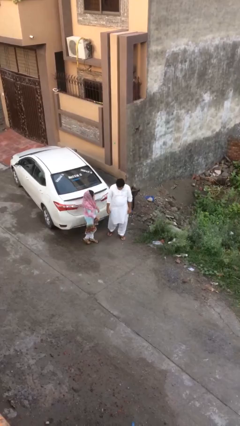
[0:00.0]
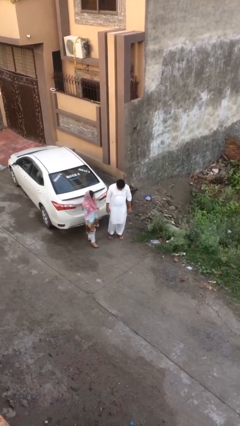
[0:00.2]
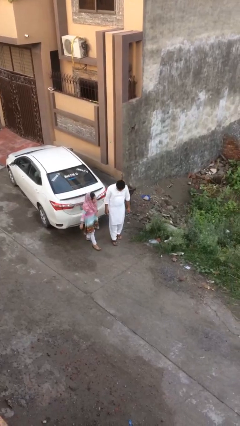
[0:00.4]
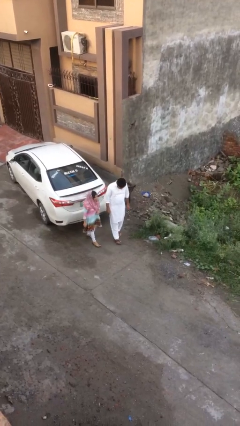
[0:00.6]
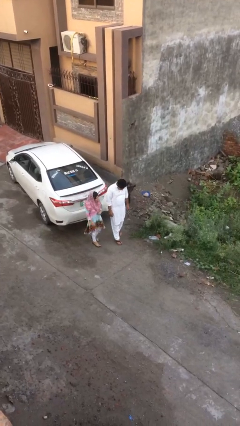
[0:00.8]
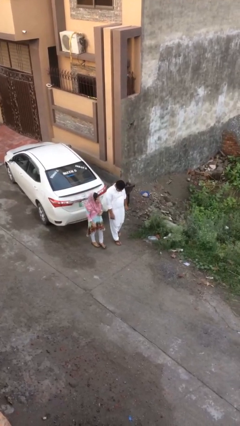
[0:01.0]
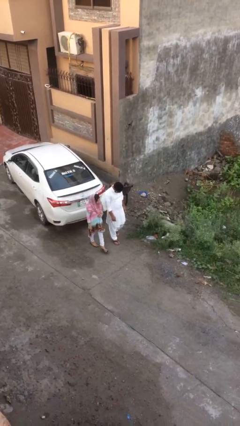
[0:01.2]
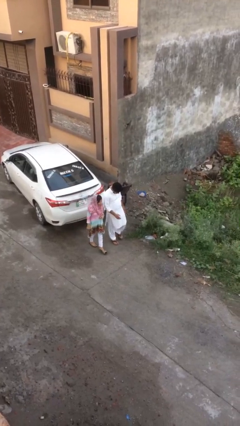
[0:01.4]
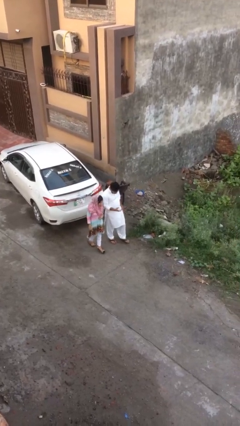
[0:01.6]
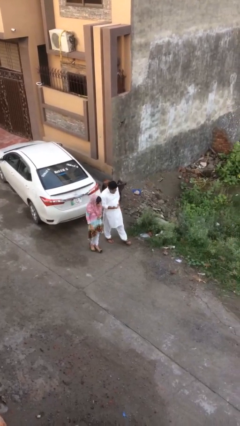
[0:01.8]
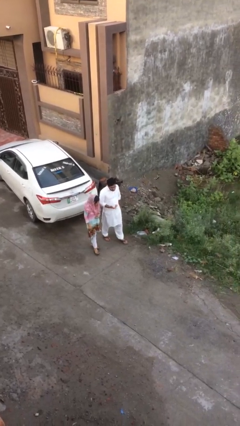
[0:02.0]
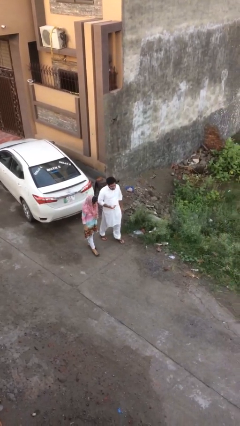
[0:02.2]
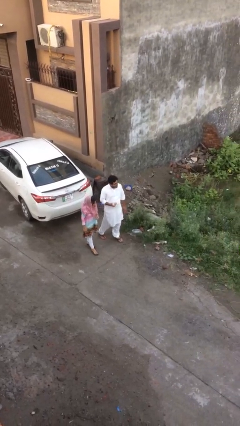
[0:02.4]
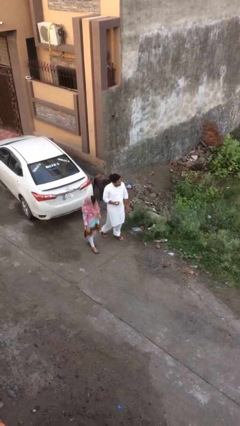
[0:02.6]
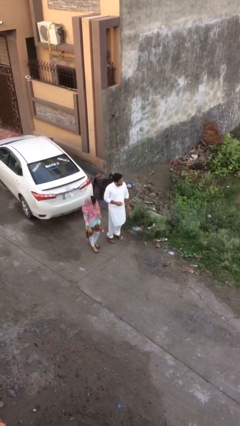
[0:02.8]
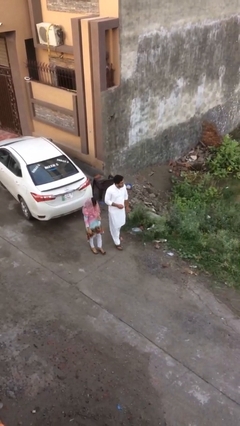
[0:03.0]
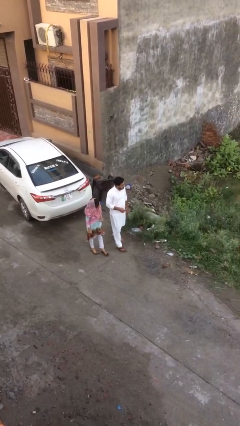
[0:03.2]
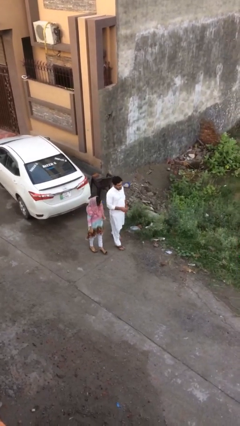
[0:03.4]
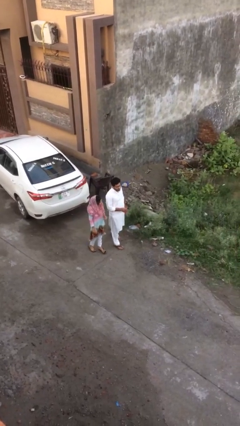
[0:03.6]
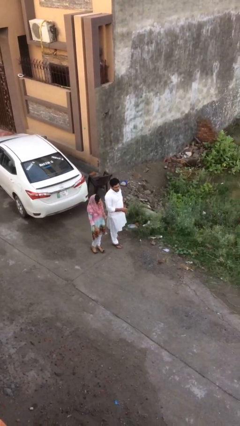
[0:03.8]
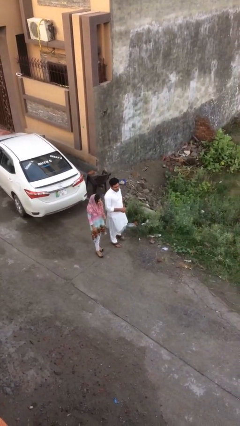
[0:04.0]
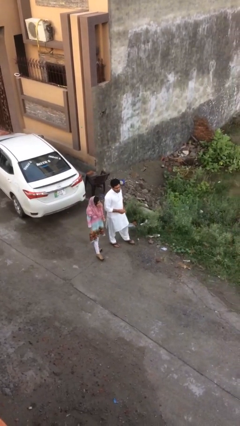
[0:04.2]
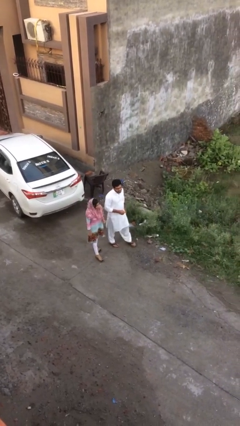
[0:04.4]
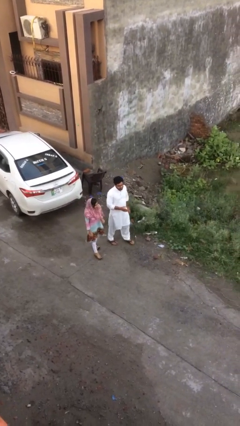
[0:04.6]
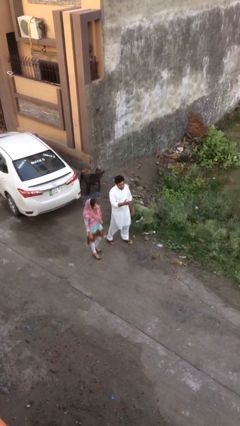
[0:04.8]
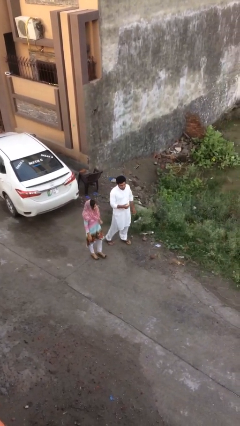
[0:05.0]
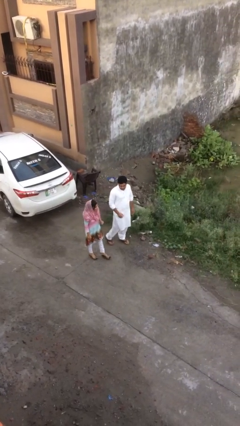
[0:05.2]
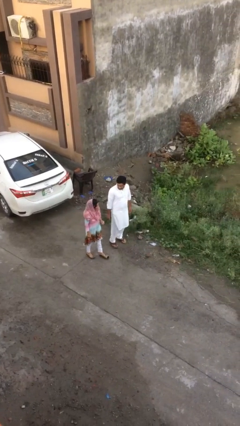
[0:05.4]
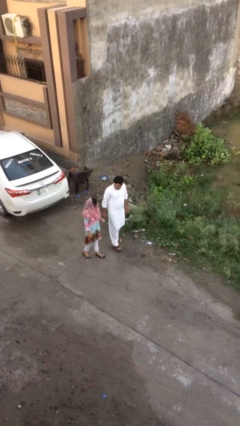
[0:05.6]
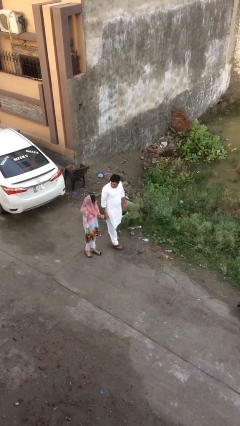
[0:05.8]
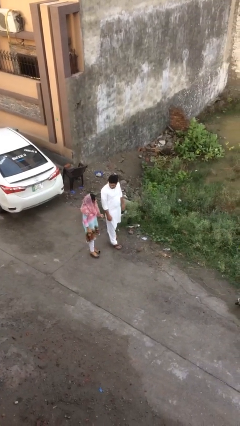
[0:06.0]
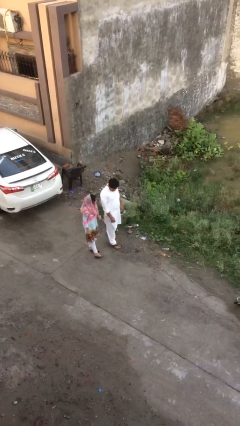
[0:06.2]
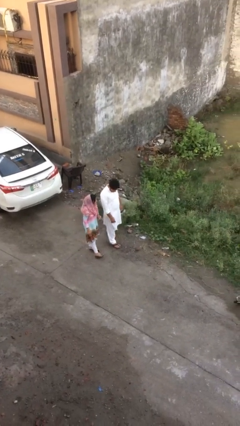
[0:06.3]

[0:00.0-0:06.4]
person talks to person

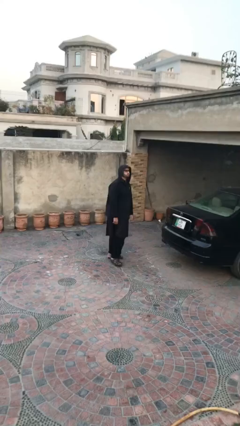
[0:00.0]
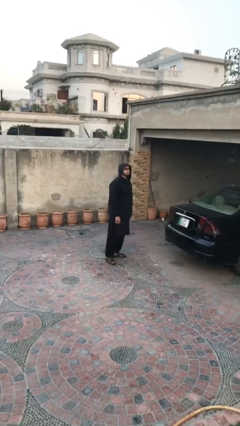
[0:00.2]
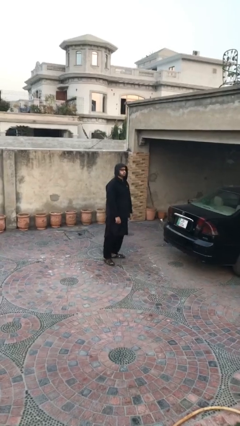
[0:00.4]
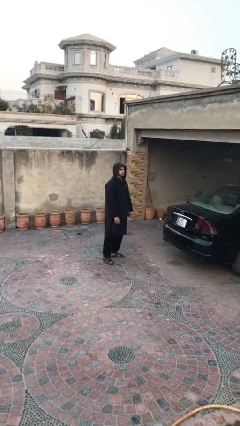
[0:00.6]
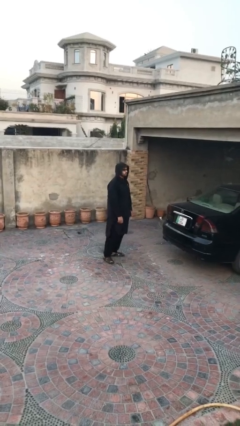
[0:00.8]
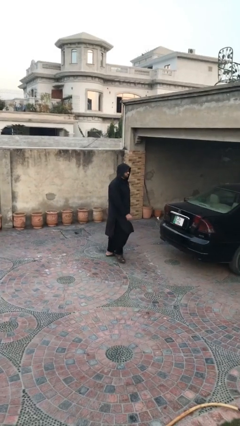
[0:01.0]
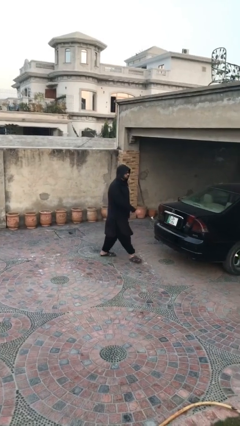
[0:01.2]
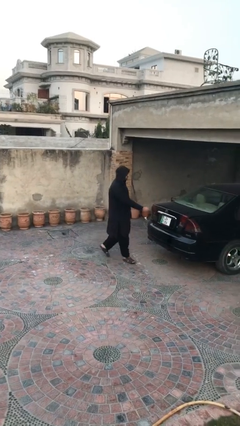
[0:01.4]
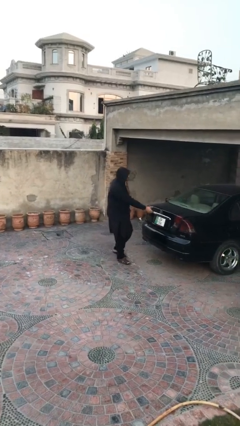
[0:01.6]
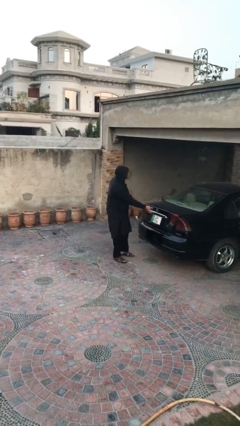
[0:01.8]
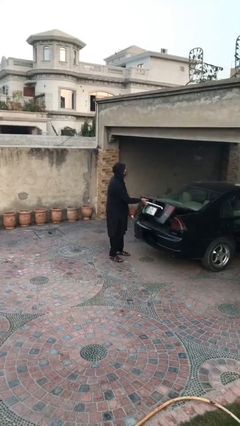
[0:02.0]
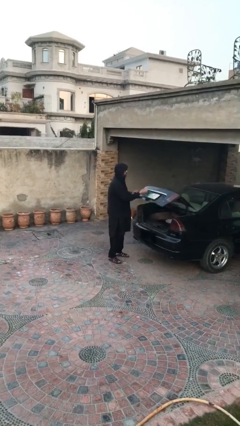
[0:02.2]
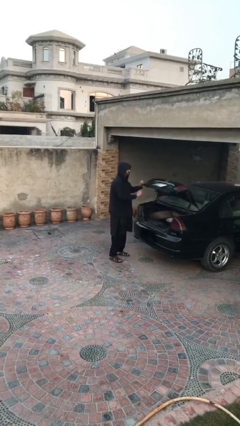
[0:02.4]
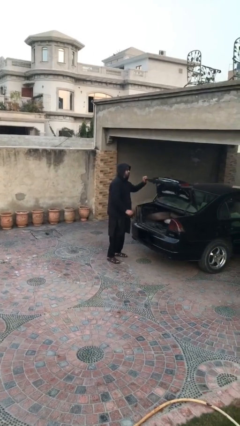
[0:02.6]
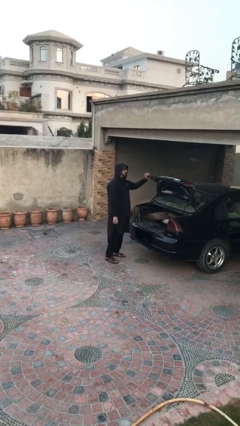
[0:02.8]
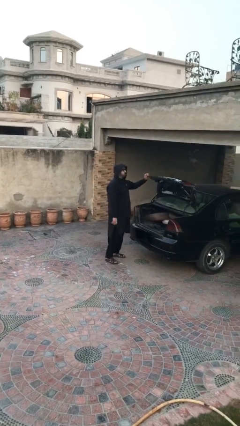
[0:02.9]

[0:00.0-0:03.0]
person opens car trunk

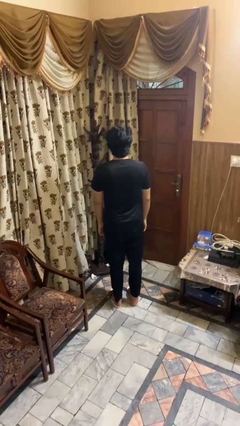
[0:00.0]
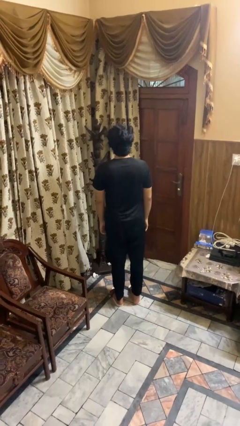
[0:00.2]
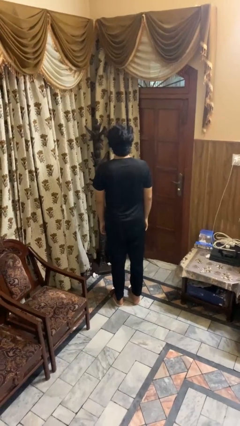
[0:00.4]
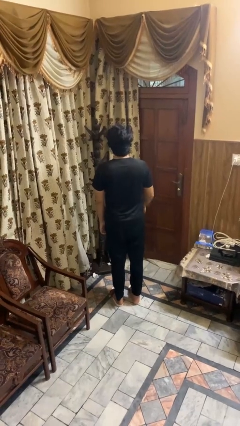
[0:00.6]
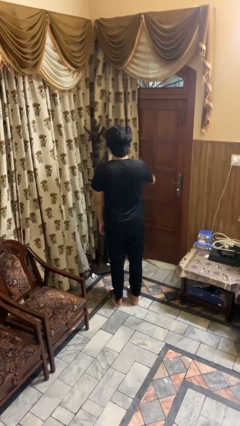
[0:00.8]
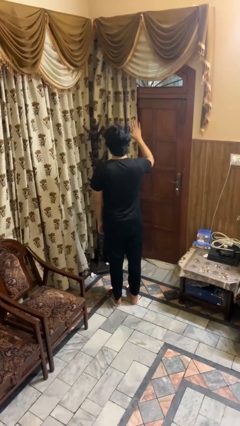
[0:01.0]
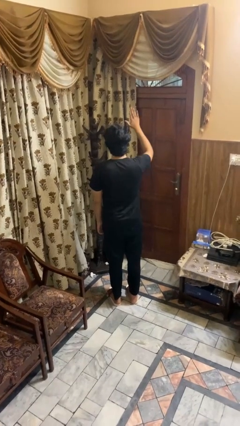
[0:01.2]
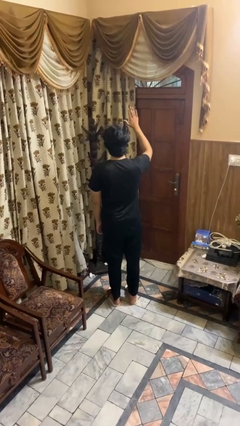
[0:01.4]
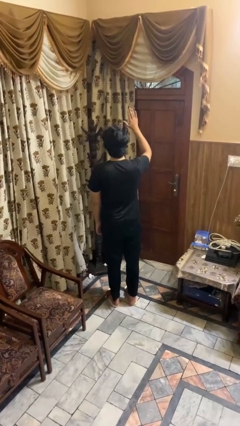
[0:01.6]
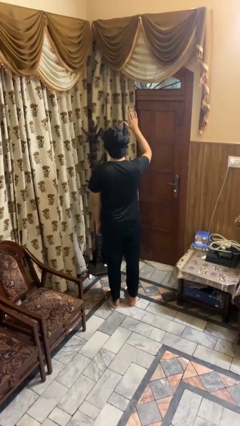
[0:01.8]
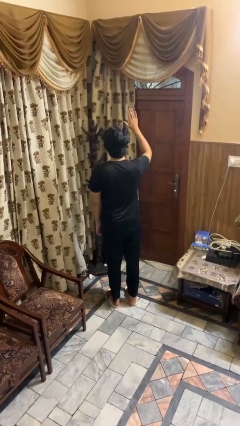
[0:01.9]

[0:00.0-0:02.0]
person gestures raise hand

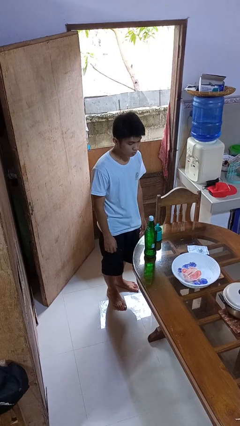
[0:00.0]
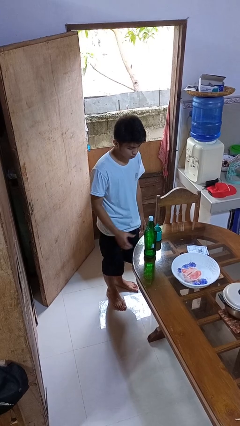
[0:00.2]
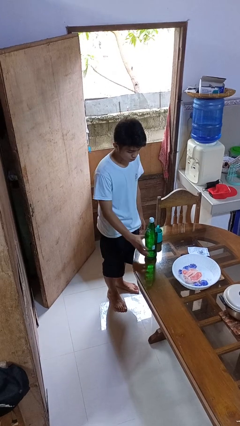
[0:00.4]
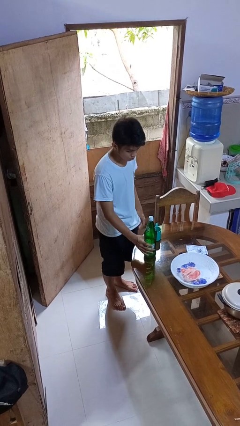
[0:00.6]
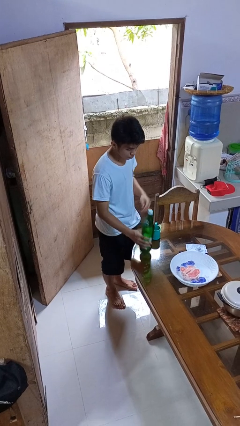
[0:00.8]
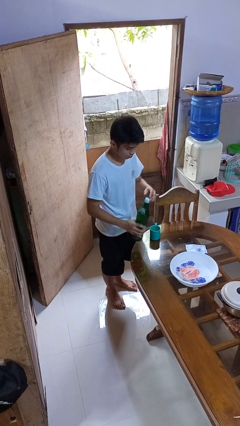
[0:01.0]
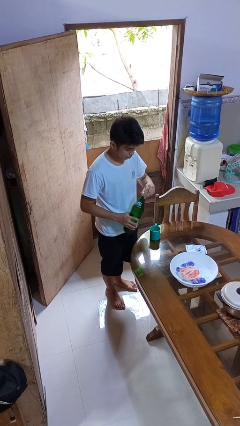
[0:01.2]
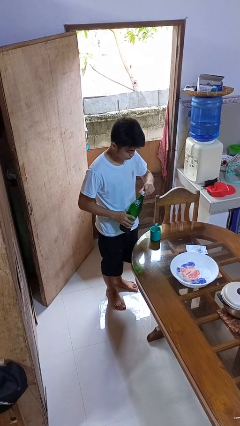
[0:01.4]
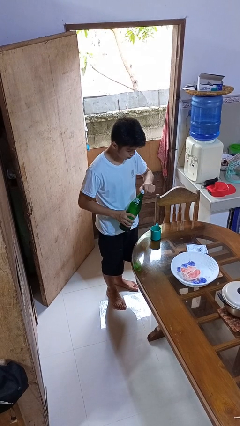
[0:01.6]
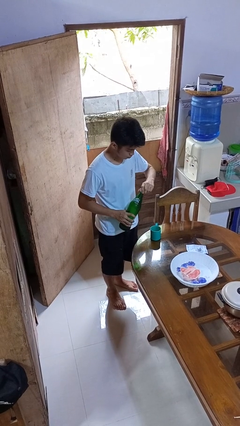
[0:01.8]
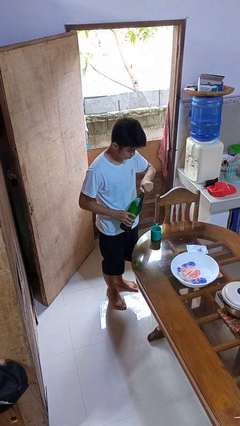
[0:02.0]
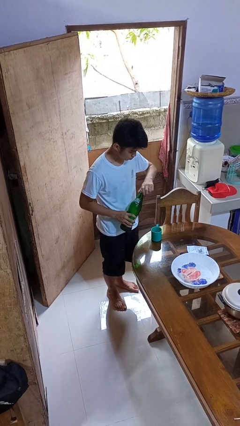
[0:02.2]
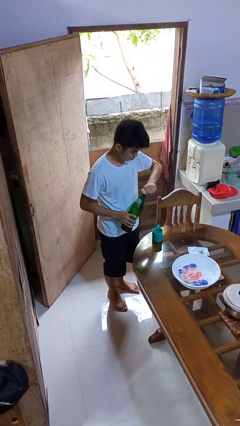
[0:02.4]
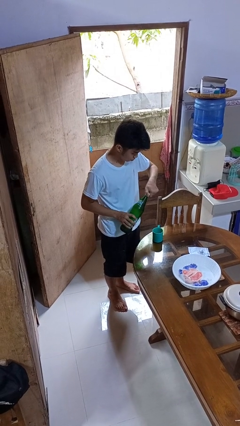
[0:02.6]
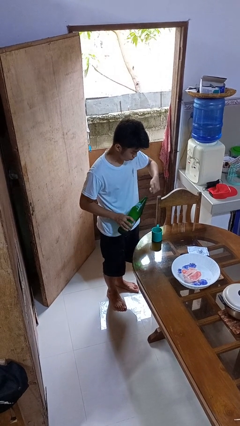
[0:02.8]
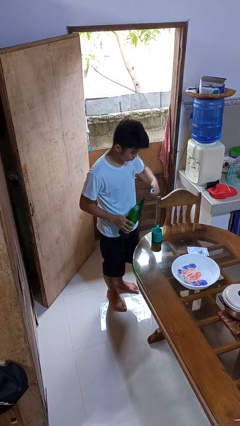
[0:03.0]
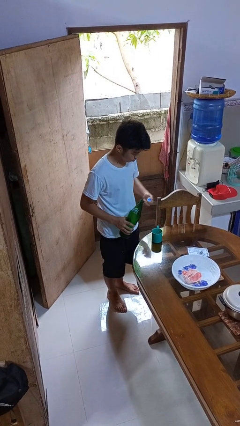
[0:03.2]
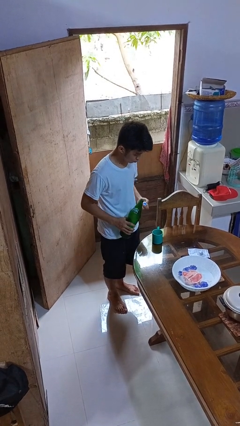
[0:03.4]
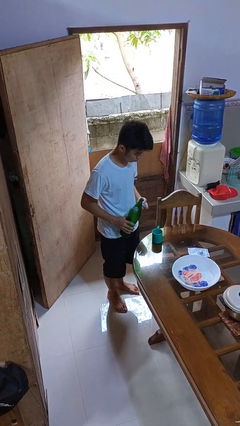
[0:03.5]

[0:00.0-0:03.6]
person unscrews lid from bottle

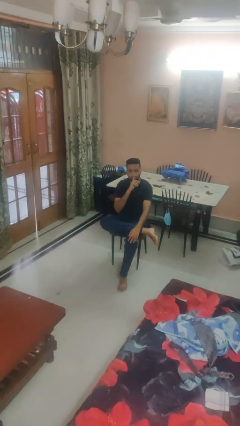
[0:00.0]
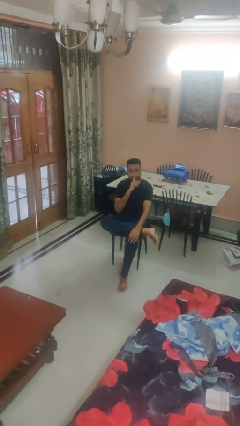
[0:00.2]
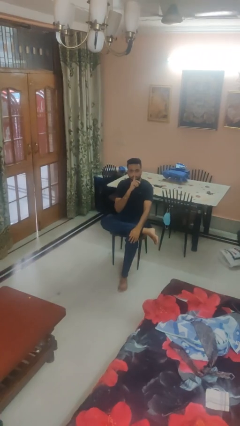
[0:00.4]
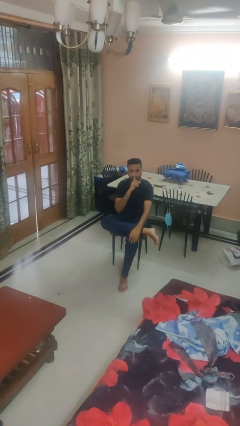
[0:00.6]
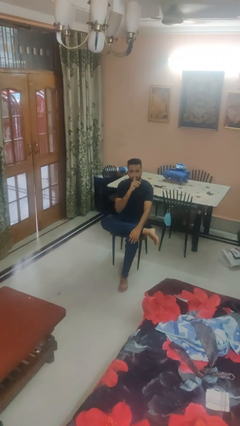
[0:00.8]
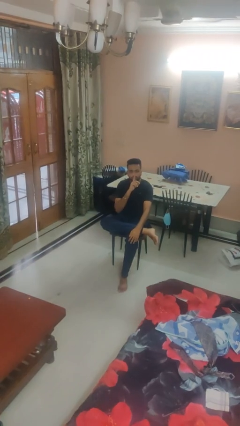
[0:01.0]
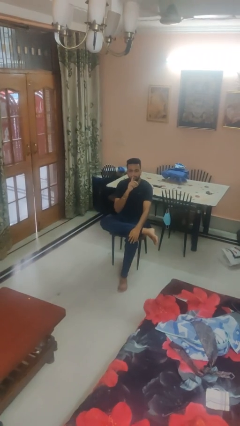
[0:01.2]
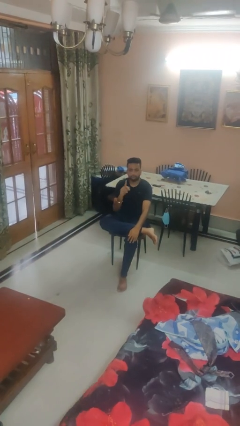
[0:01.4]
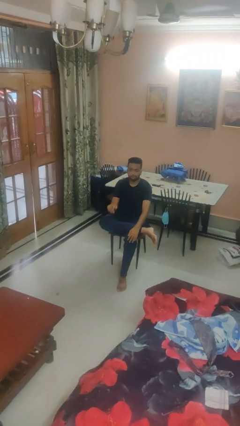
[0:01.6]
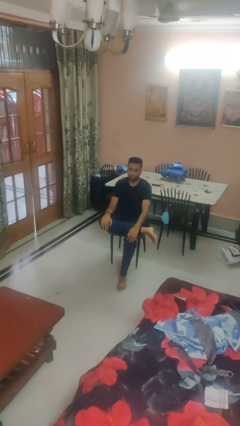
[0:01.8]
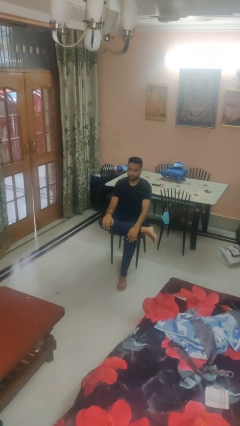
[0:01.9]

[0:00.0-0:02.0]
person gestures be quiet

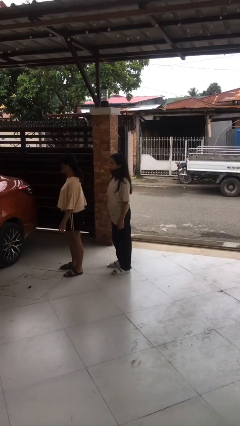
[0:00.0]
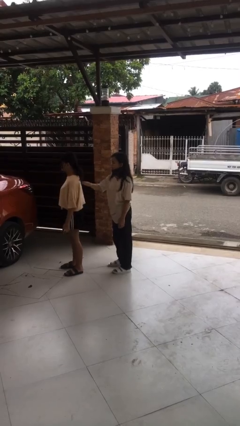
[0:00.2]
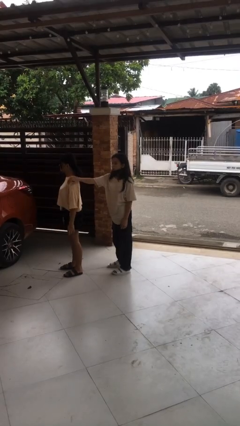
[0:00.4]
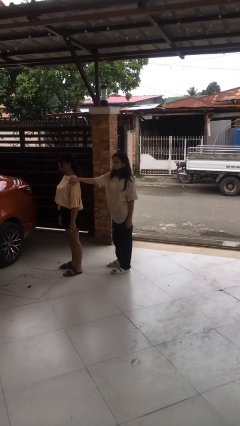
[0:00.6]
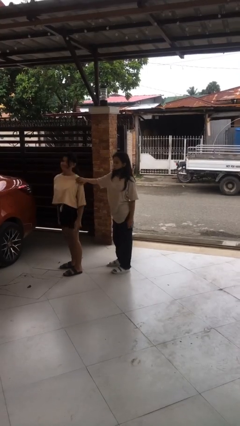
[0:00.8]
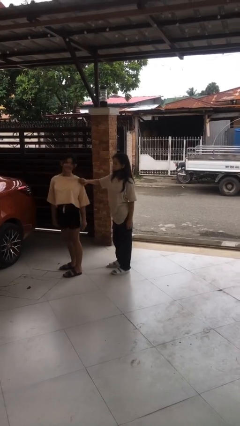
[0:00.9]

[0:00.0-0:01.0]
person grabs person by shoulder
